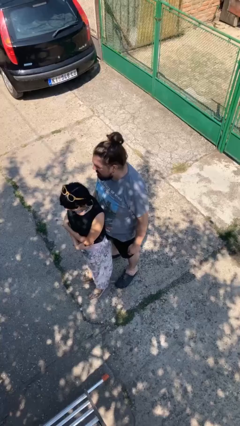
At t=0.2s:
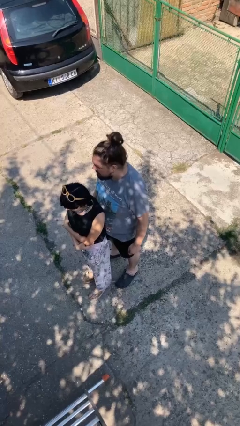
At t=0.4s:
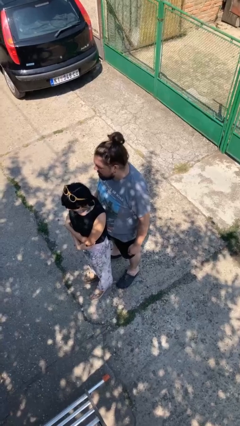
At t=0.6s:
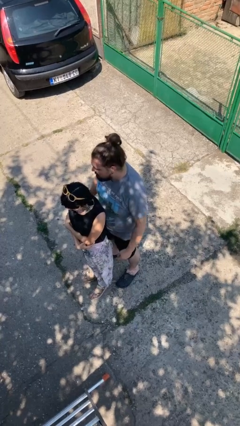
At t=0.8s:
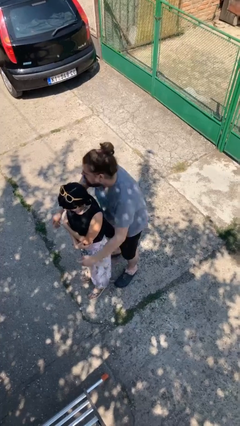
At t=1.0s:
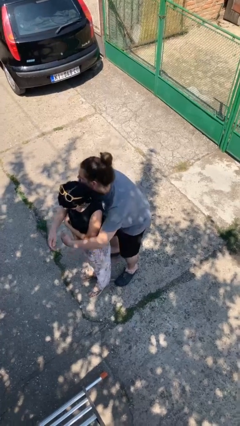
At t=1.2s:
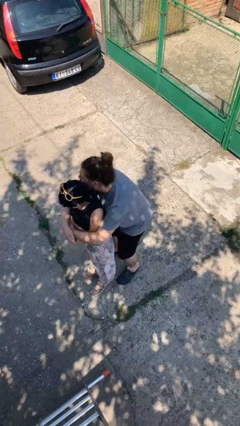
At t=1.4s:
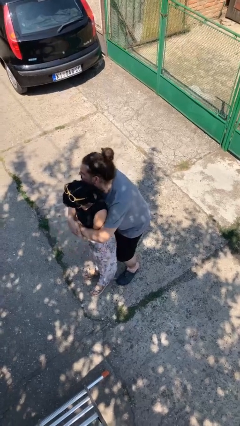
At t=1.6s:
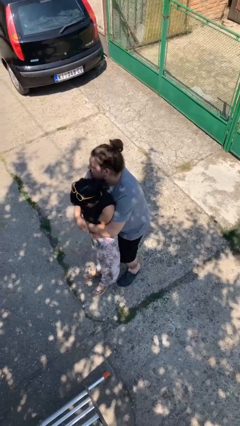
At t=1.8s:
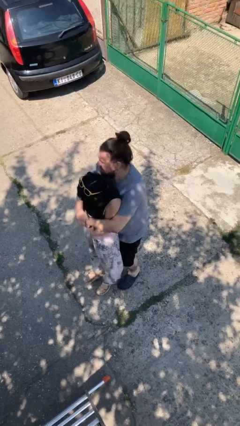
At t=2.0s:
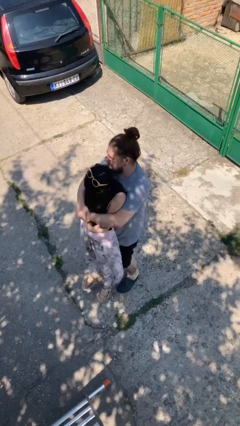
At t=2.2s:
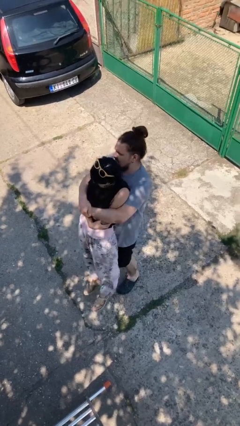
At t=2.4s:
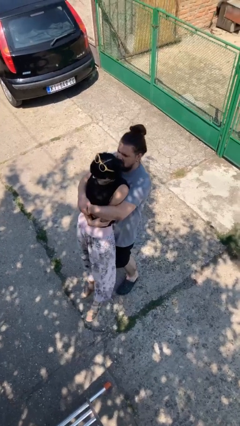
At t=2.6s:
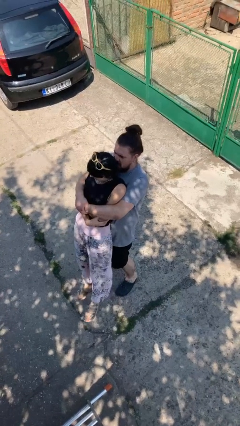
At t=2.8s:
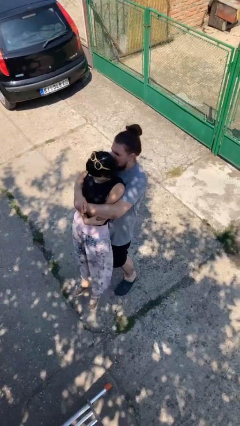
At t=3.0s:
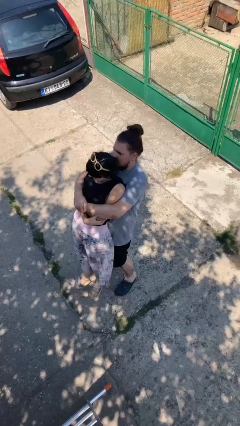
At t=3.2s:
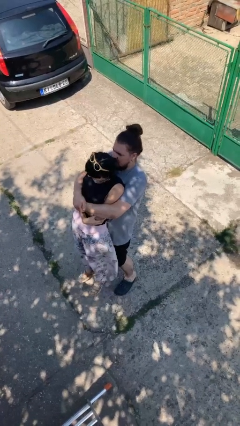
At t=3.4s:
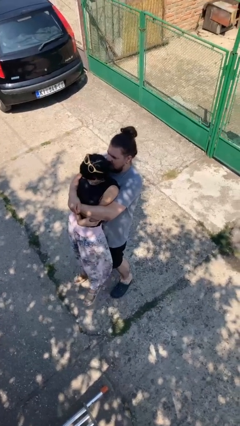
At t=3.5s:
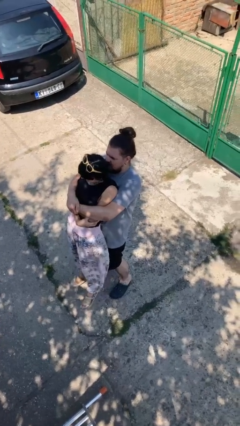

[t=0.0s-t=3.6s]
person picks up person

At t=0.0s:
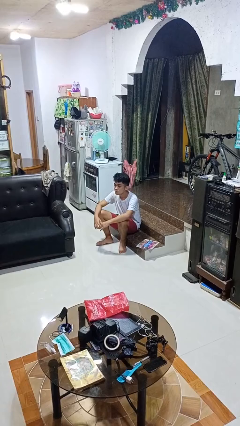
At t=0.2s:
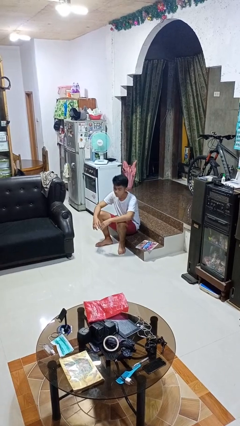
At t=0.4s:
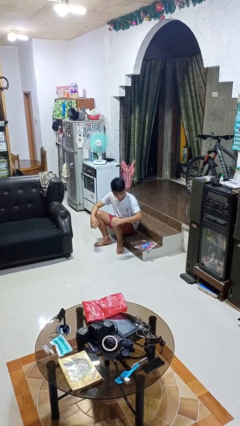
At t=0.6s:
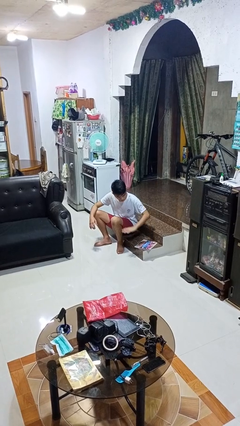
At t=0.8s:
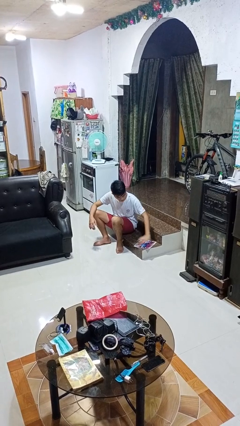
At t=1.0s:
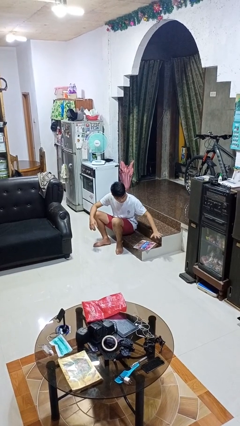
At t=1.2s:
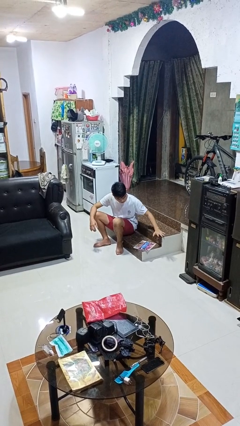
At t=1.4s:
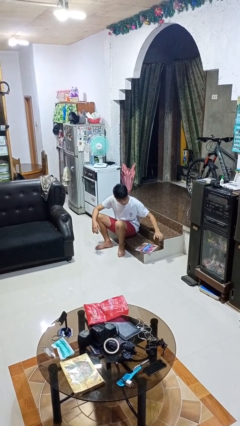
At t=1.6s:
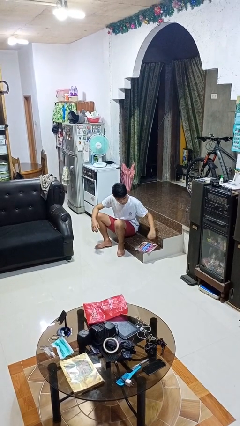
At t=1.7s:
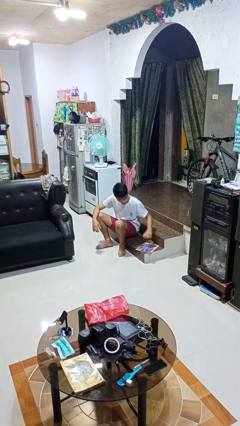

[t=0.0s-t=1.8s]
person waves hand over object

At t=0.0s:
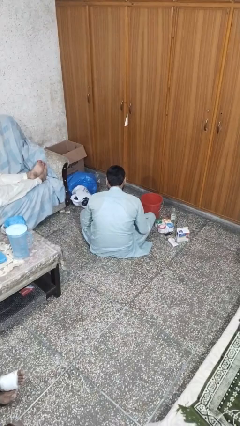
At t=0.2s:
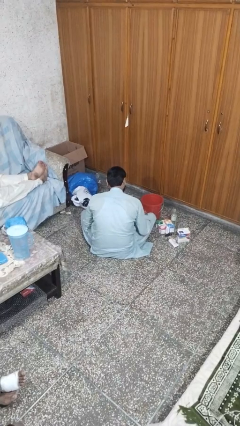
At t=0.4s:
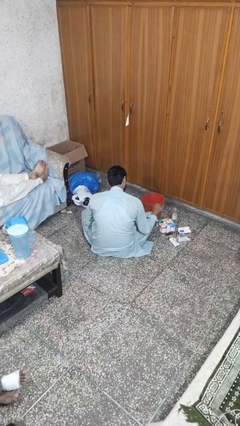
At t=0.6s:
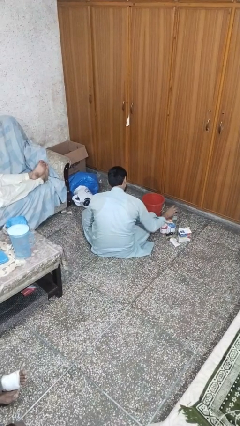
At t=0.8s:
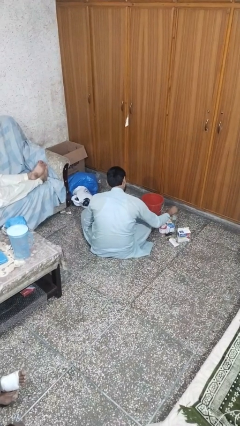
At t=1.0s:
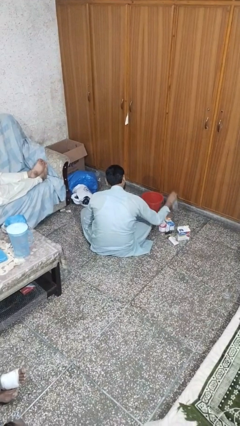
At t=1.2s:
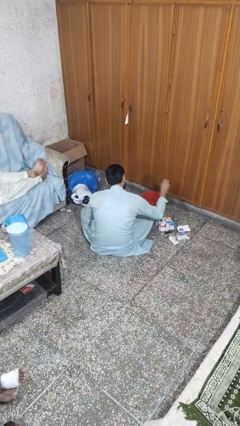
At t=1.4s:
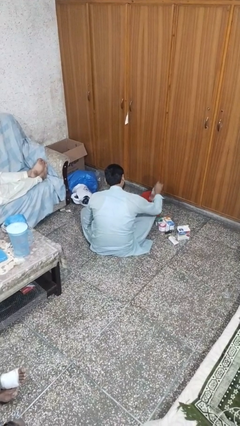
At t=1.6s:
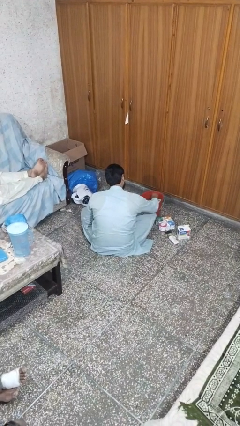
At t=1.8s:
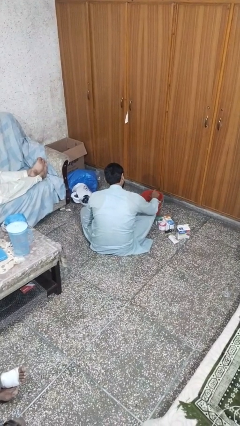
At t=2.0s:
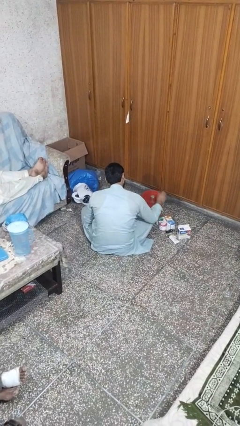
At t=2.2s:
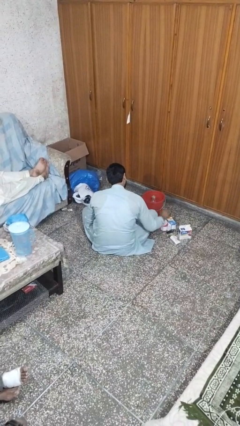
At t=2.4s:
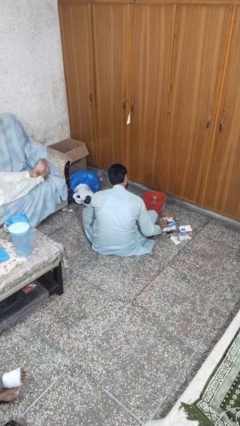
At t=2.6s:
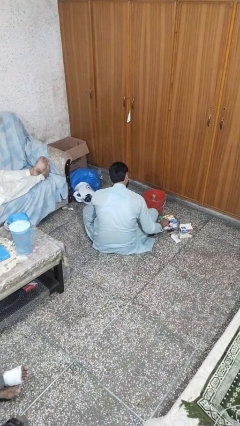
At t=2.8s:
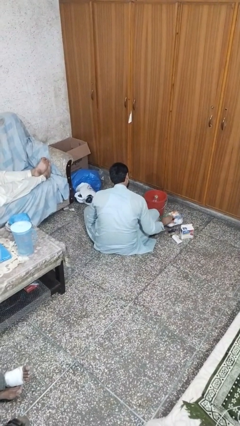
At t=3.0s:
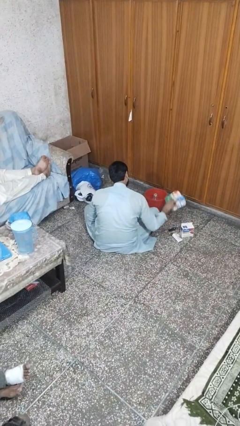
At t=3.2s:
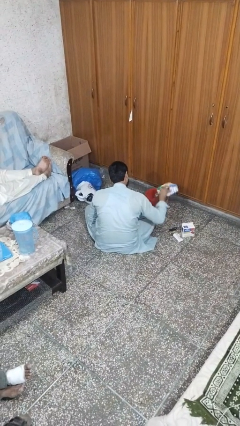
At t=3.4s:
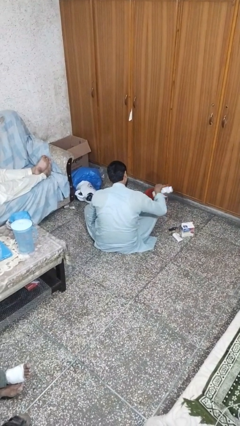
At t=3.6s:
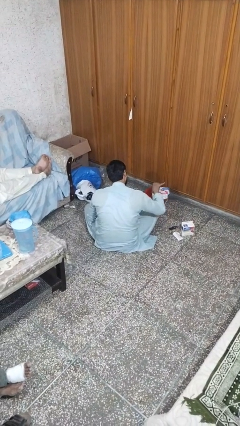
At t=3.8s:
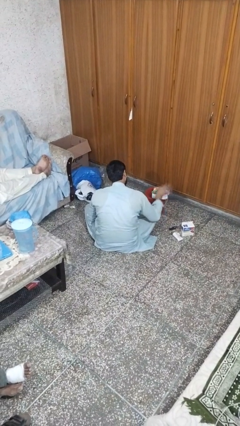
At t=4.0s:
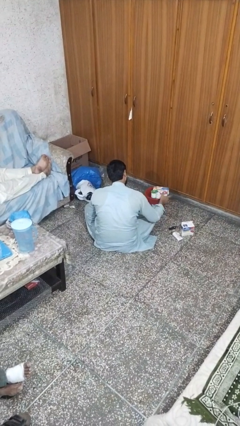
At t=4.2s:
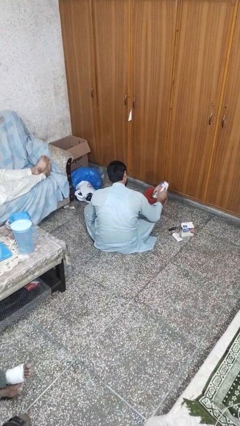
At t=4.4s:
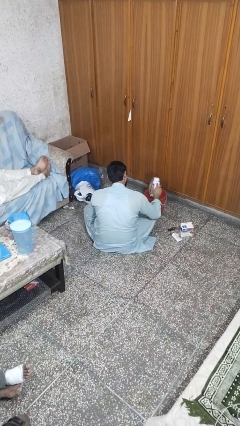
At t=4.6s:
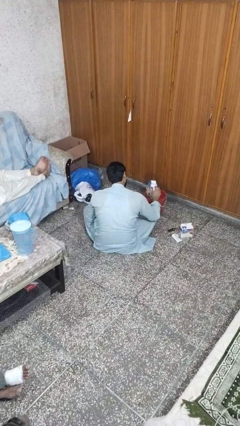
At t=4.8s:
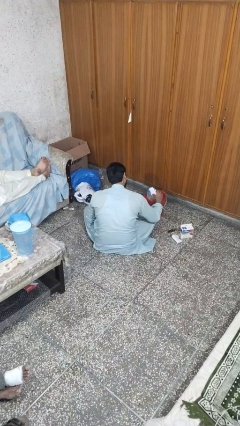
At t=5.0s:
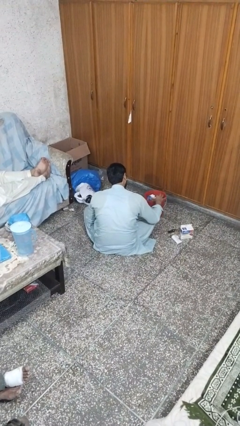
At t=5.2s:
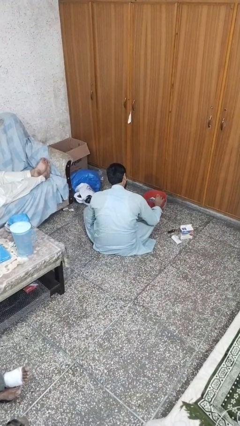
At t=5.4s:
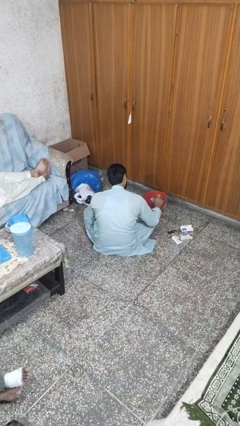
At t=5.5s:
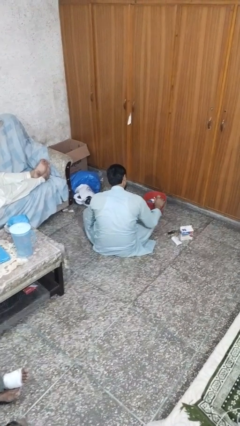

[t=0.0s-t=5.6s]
person puts object into basket

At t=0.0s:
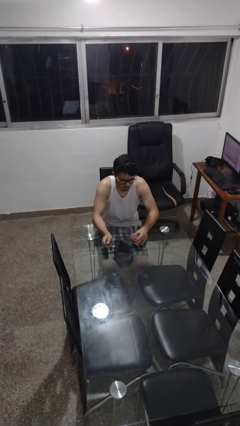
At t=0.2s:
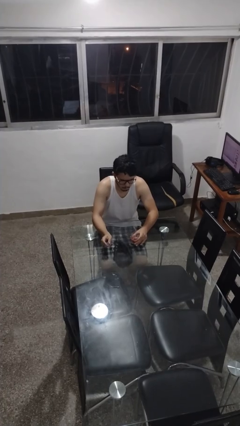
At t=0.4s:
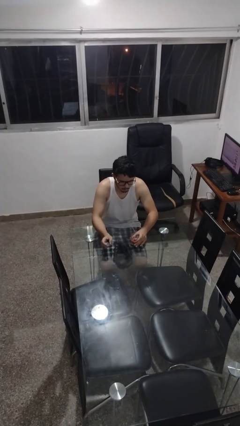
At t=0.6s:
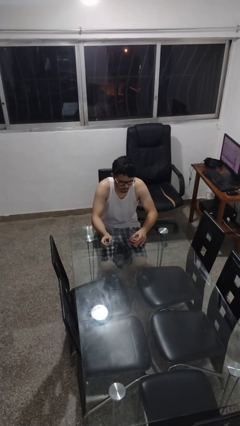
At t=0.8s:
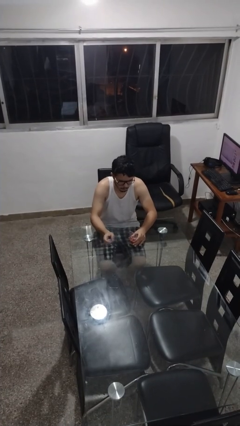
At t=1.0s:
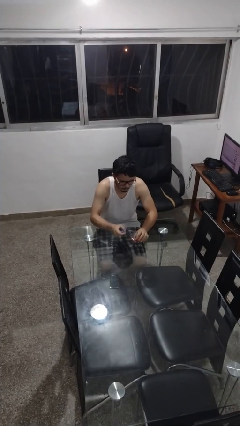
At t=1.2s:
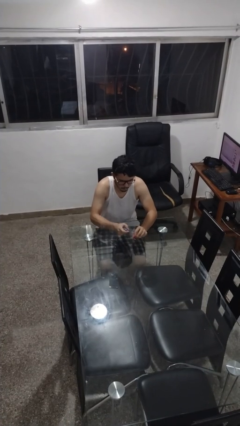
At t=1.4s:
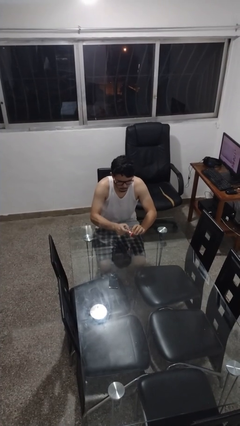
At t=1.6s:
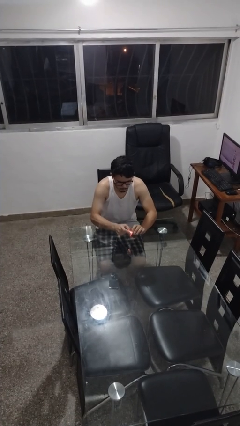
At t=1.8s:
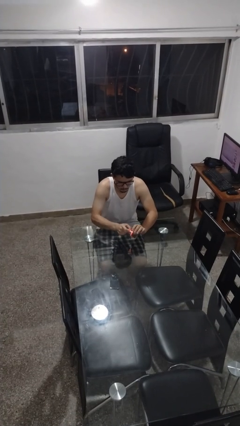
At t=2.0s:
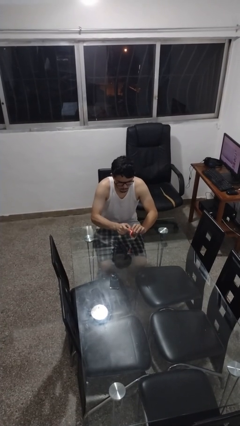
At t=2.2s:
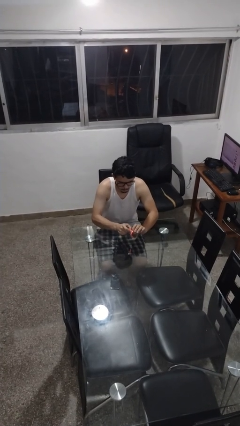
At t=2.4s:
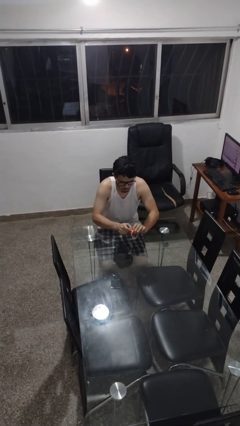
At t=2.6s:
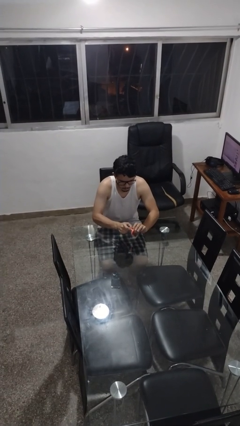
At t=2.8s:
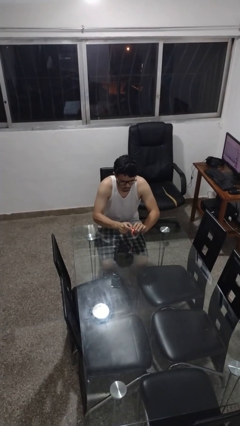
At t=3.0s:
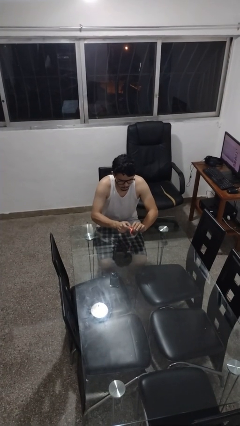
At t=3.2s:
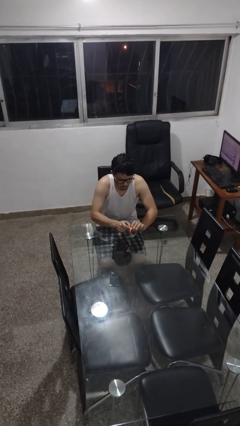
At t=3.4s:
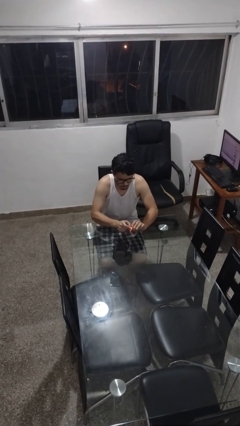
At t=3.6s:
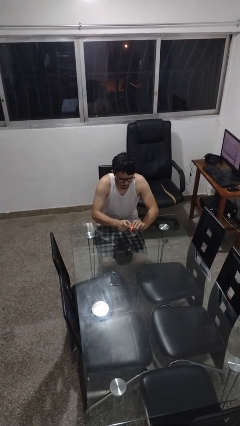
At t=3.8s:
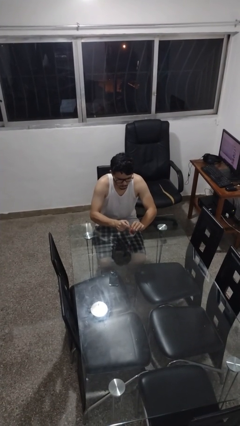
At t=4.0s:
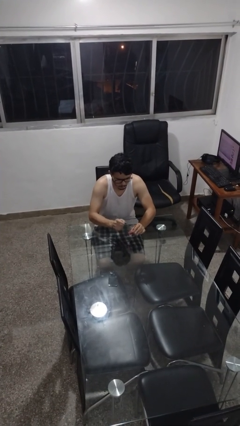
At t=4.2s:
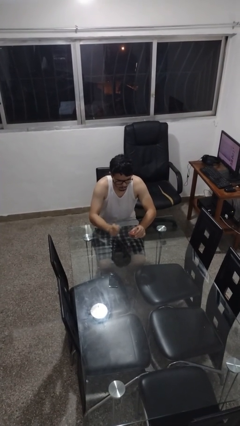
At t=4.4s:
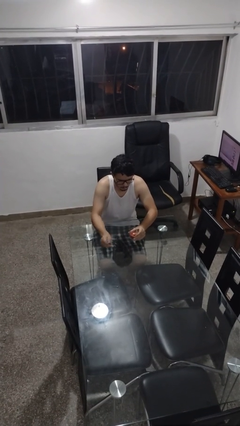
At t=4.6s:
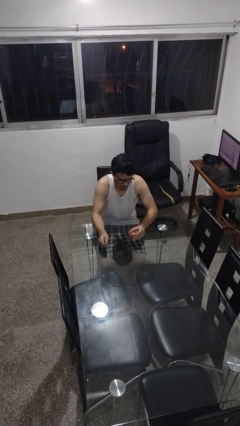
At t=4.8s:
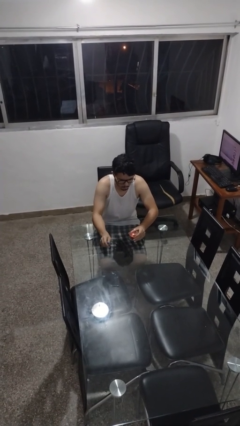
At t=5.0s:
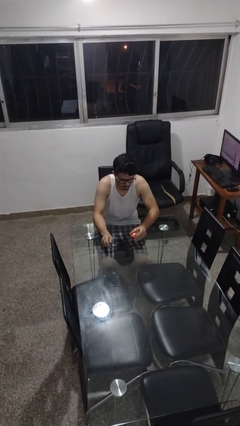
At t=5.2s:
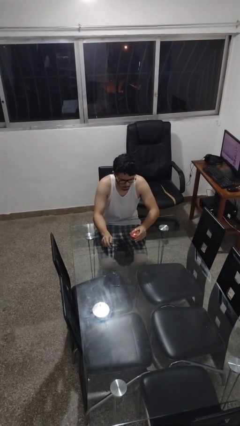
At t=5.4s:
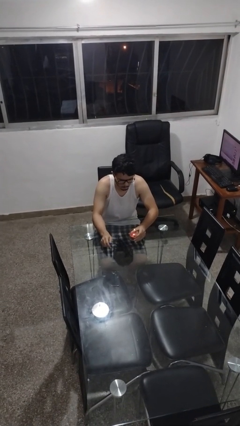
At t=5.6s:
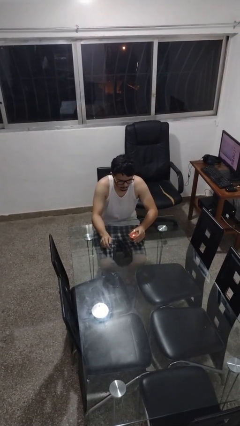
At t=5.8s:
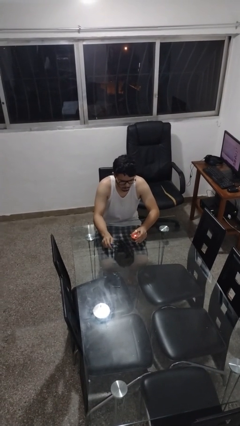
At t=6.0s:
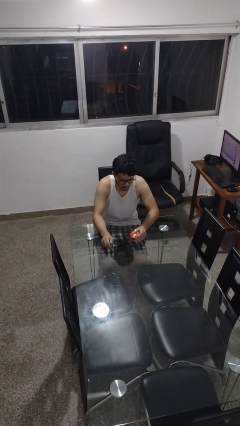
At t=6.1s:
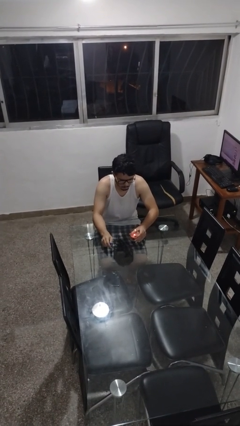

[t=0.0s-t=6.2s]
person lights candle

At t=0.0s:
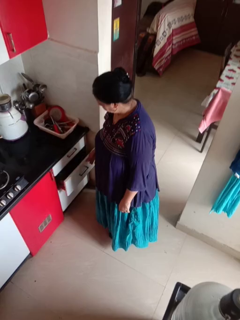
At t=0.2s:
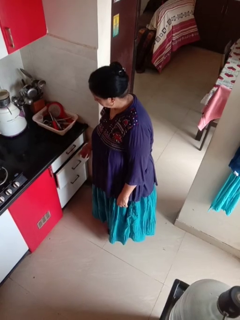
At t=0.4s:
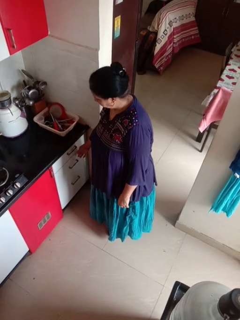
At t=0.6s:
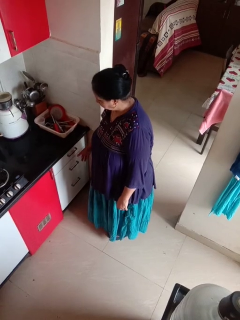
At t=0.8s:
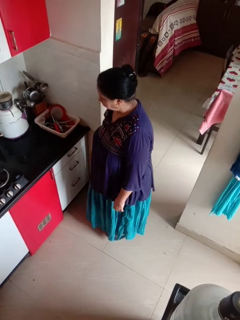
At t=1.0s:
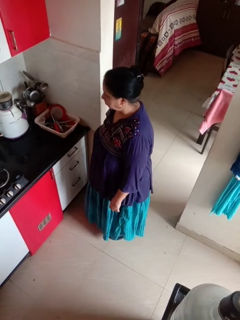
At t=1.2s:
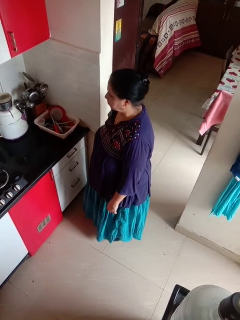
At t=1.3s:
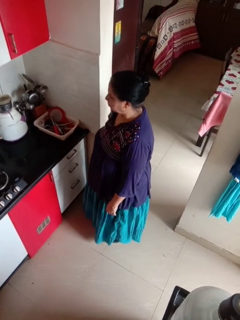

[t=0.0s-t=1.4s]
person closes kitchen drawer
